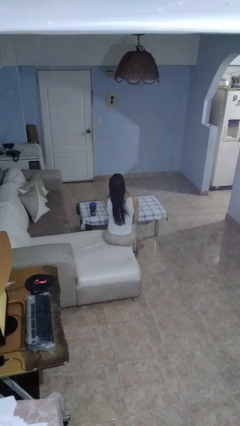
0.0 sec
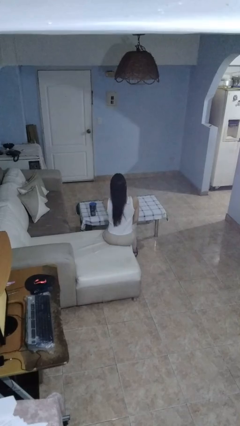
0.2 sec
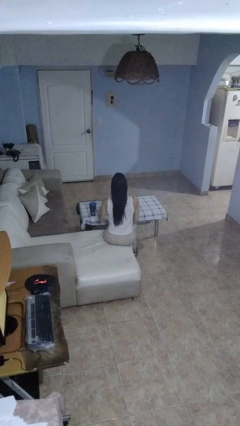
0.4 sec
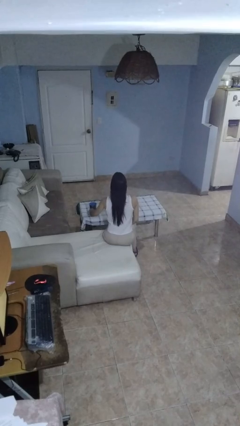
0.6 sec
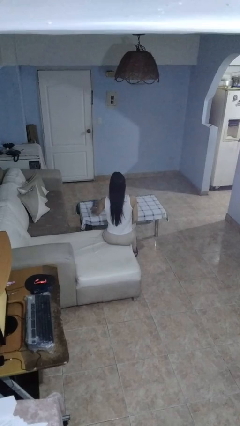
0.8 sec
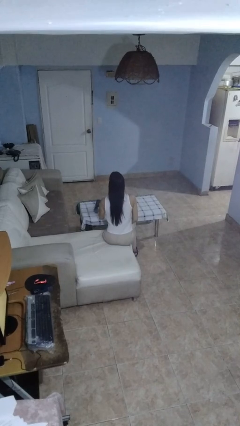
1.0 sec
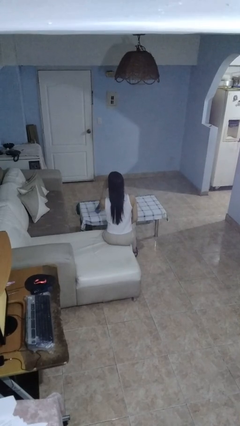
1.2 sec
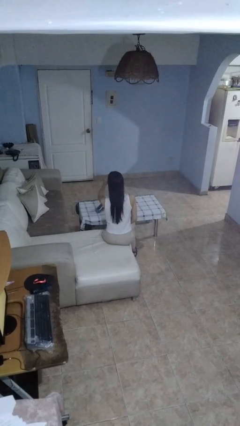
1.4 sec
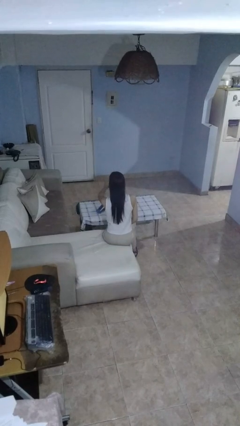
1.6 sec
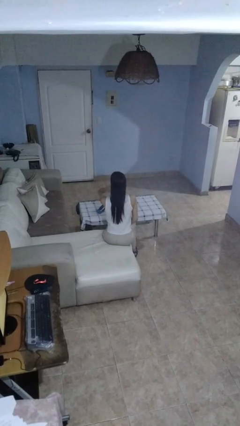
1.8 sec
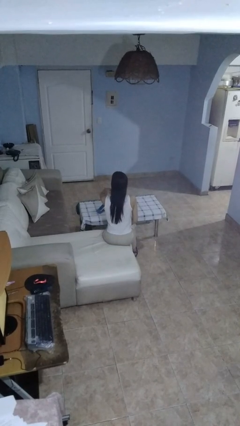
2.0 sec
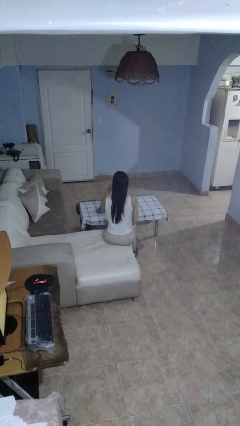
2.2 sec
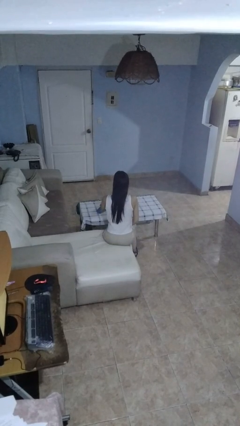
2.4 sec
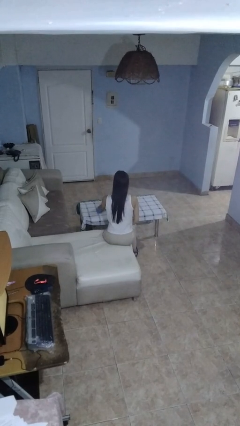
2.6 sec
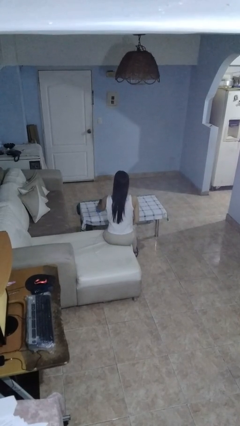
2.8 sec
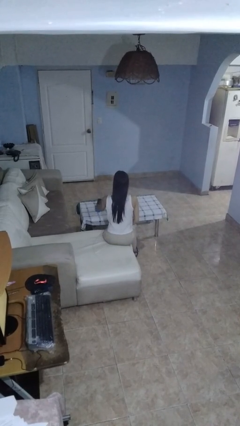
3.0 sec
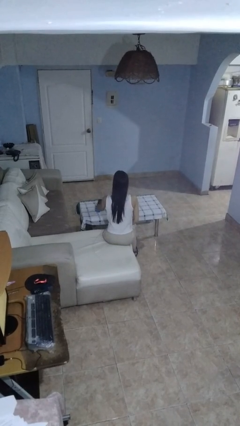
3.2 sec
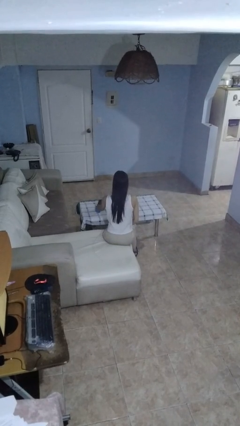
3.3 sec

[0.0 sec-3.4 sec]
person knocks over glass

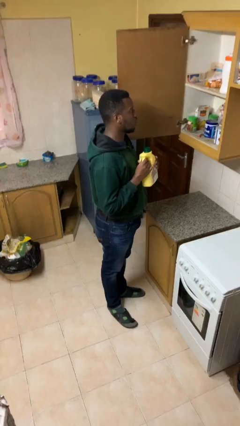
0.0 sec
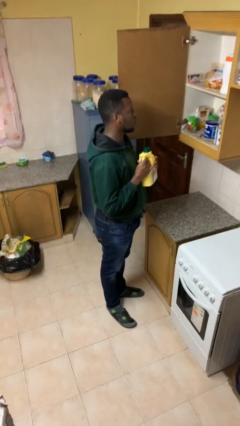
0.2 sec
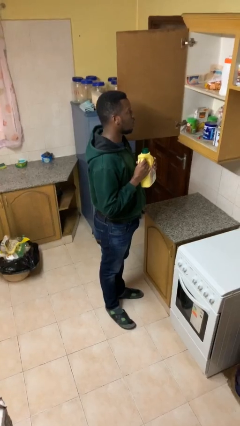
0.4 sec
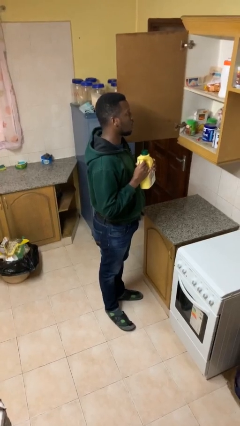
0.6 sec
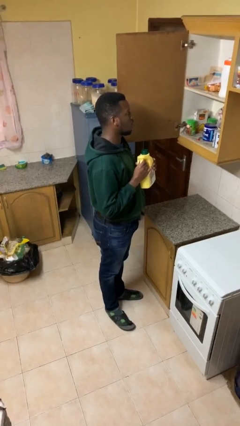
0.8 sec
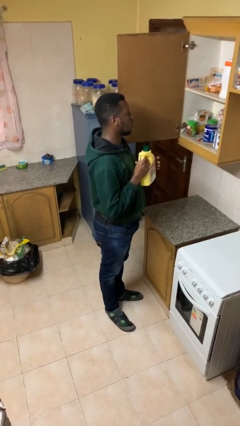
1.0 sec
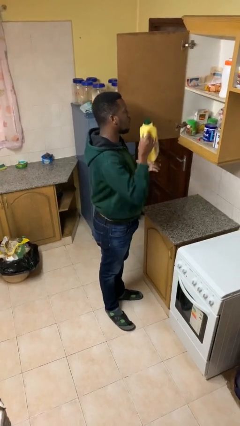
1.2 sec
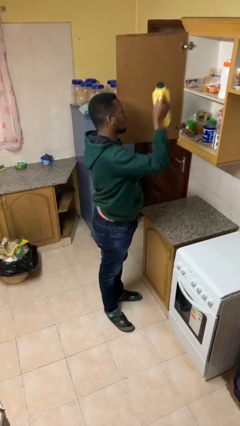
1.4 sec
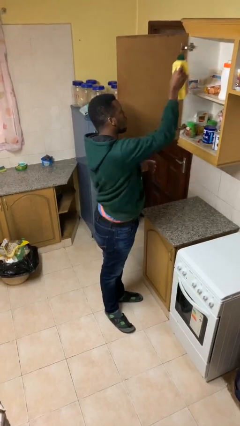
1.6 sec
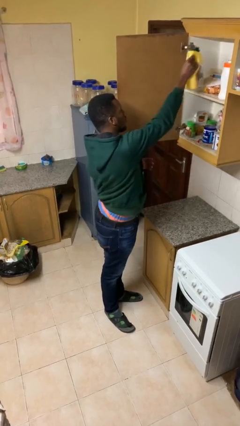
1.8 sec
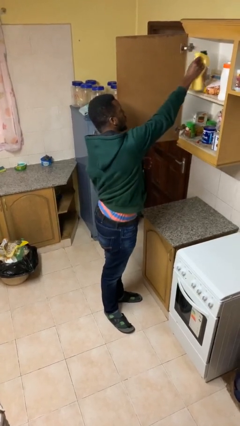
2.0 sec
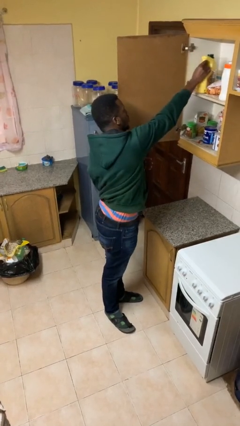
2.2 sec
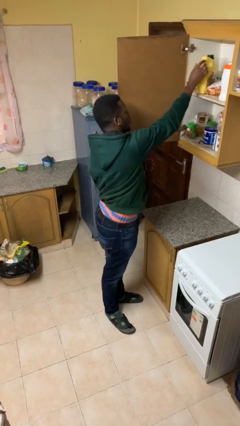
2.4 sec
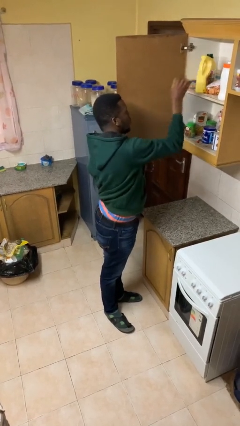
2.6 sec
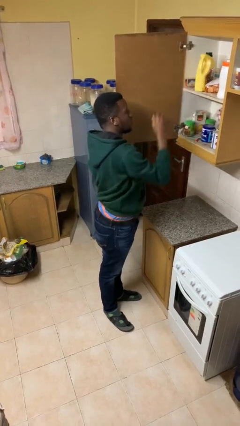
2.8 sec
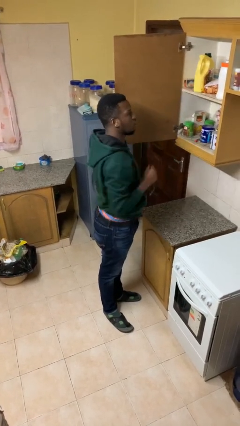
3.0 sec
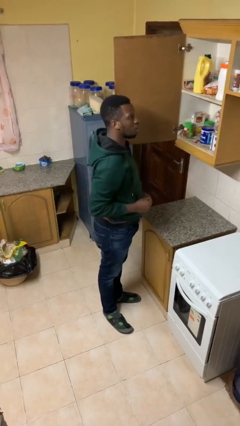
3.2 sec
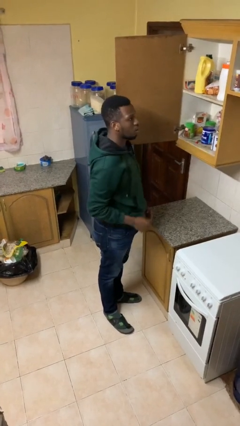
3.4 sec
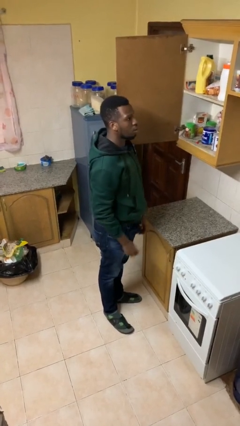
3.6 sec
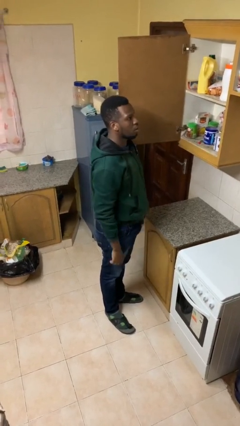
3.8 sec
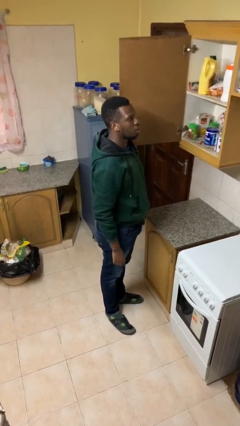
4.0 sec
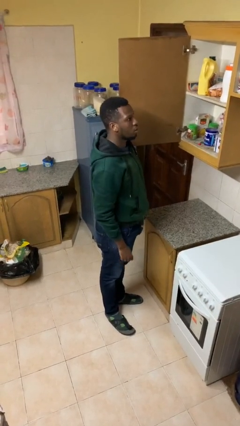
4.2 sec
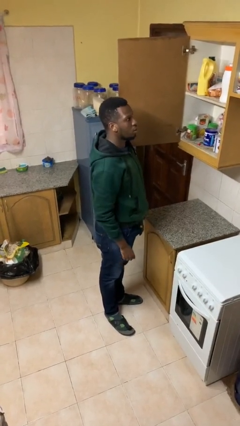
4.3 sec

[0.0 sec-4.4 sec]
person puts down object on shelf

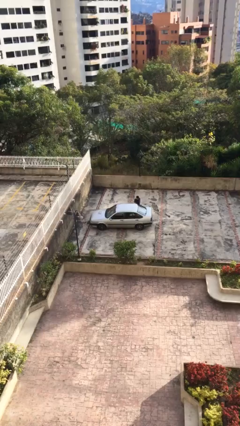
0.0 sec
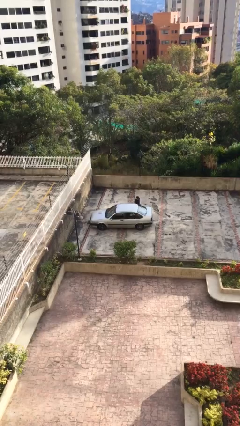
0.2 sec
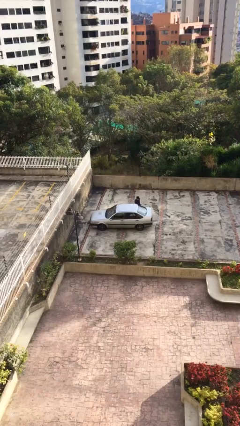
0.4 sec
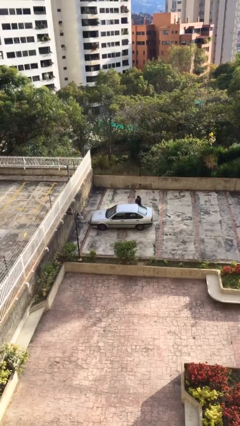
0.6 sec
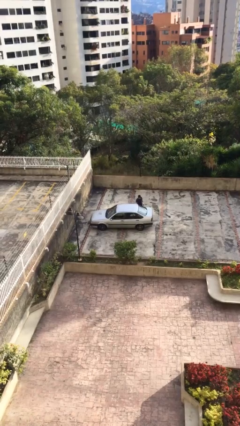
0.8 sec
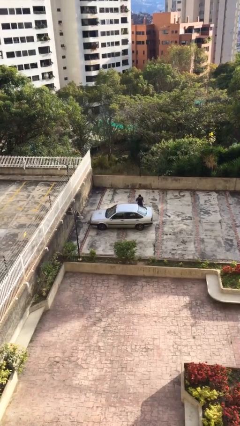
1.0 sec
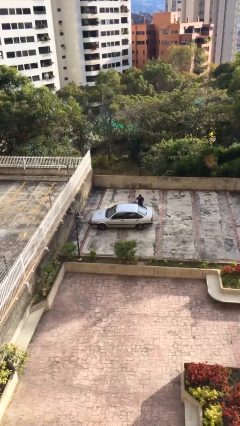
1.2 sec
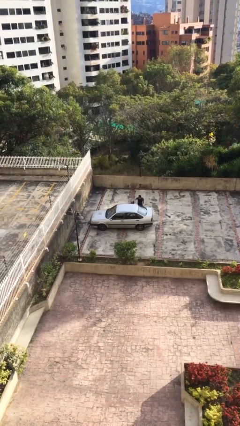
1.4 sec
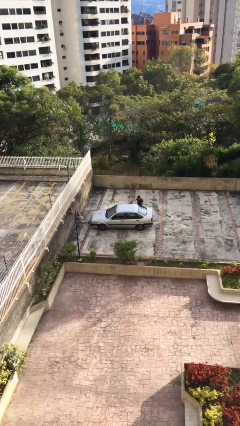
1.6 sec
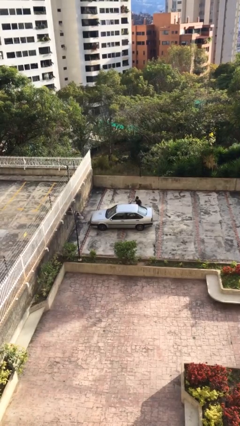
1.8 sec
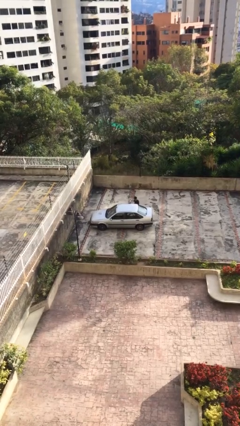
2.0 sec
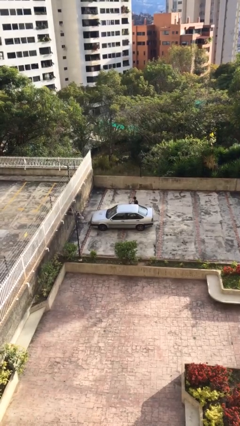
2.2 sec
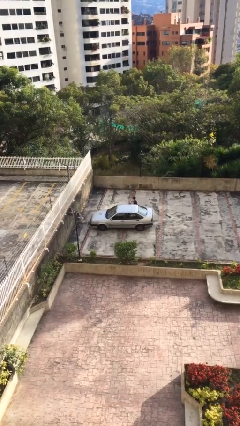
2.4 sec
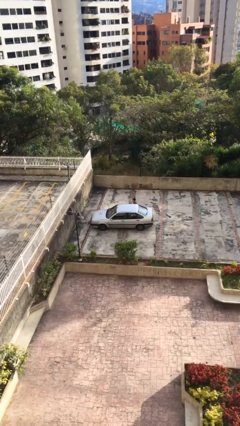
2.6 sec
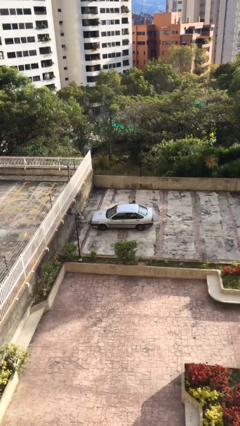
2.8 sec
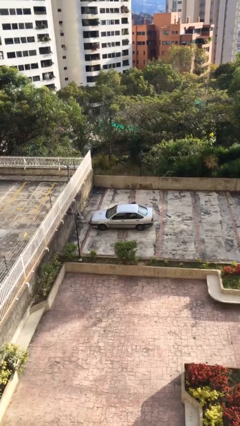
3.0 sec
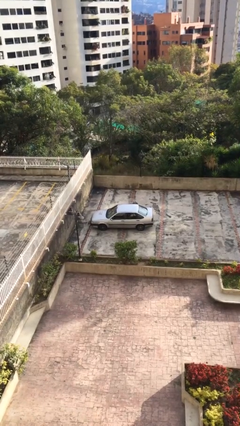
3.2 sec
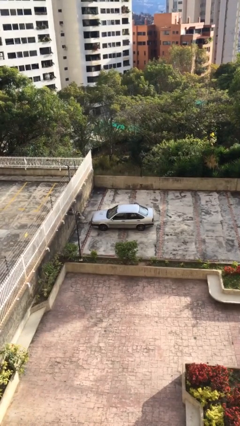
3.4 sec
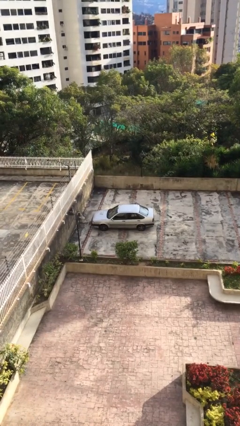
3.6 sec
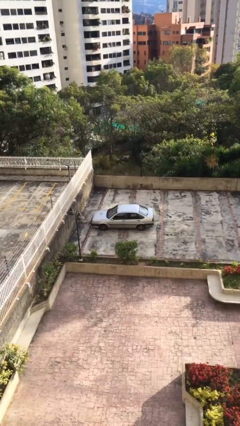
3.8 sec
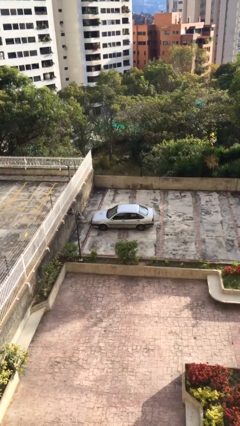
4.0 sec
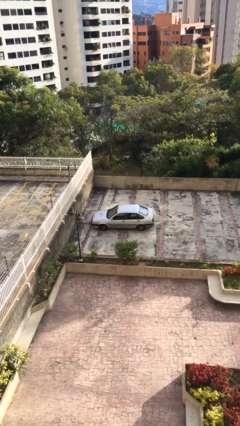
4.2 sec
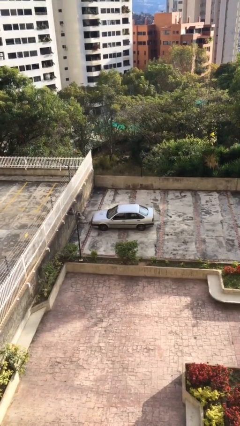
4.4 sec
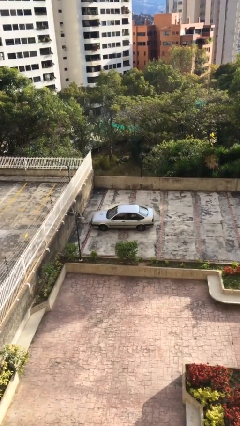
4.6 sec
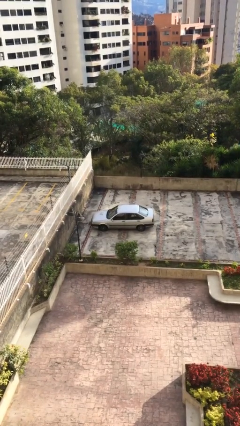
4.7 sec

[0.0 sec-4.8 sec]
car picks up person

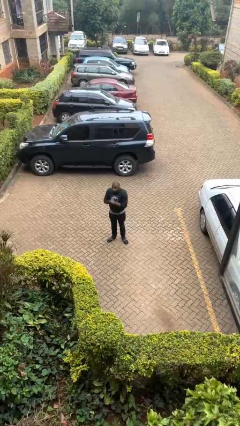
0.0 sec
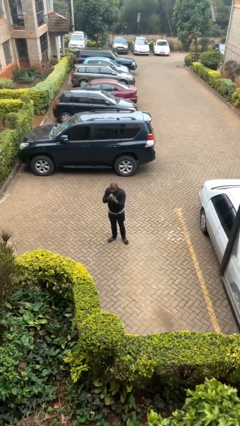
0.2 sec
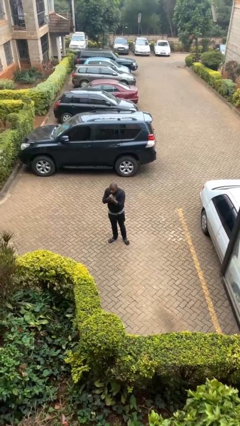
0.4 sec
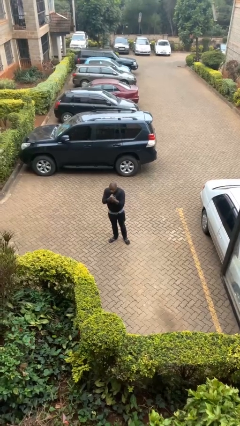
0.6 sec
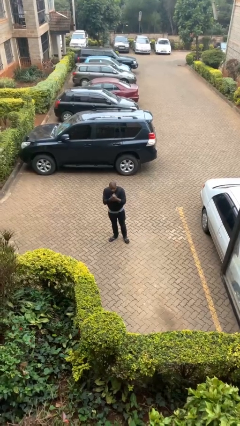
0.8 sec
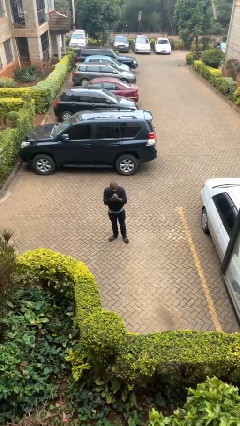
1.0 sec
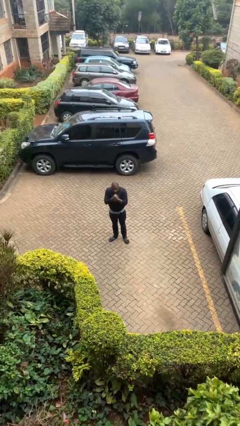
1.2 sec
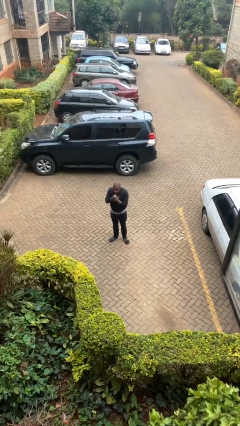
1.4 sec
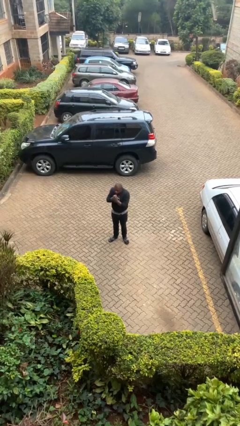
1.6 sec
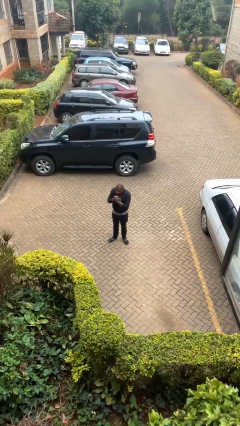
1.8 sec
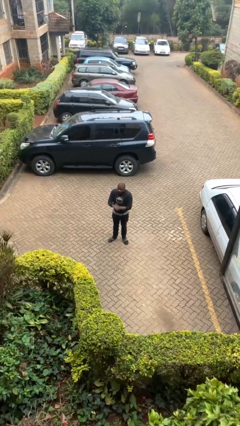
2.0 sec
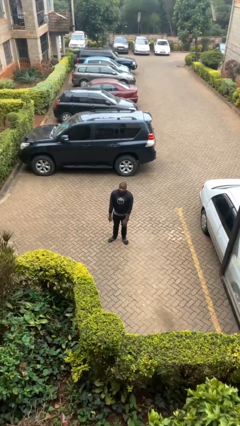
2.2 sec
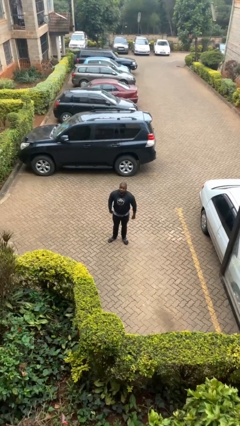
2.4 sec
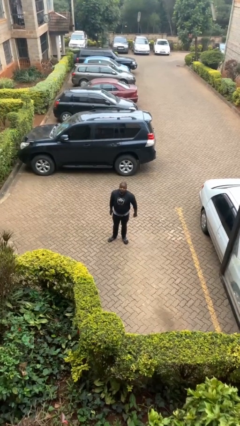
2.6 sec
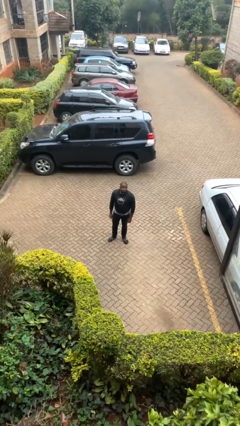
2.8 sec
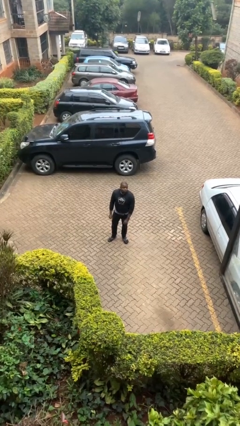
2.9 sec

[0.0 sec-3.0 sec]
person blows into hands

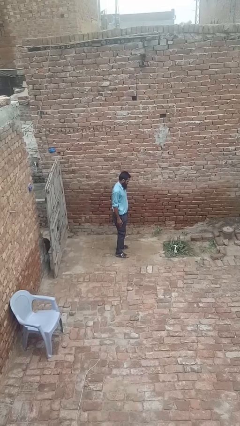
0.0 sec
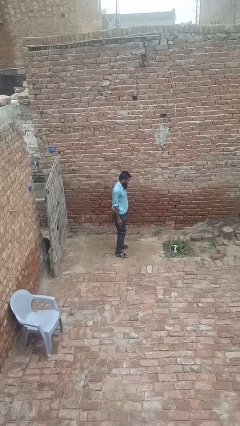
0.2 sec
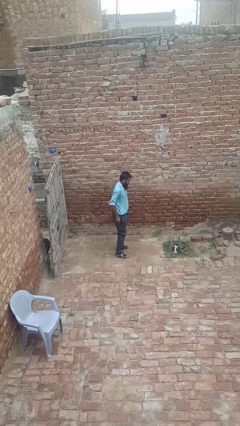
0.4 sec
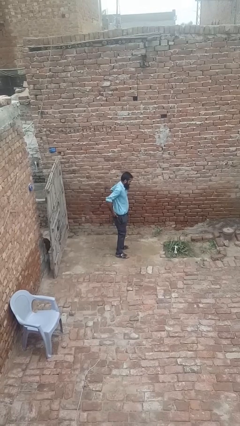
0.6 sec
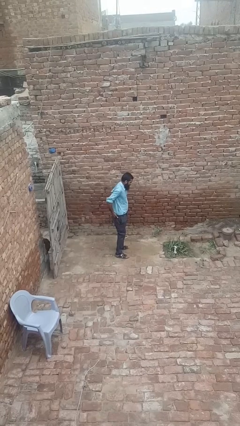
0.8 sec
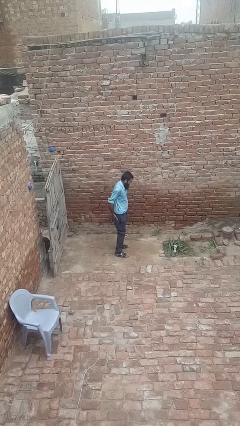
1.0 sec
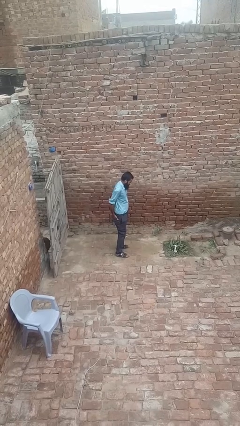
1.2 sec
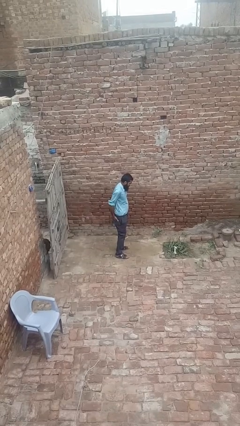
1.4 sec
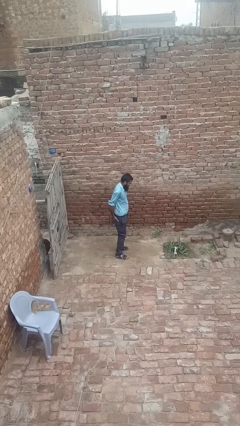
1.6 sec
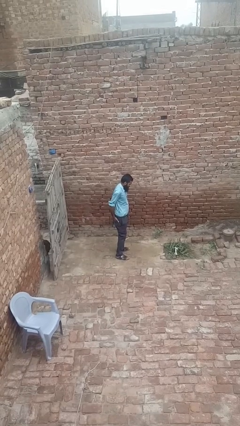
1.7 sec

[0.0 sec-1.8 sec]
person puts hands in back pockets

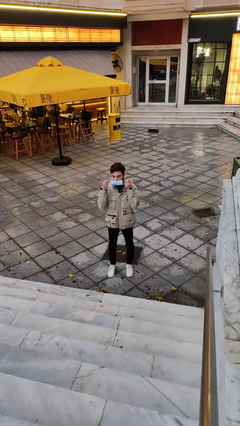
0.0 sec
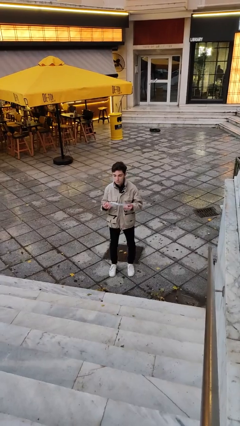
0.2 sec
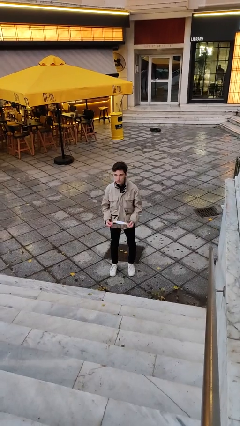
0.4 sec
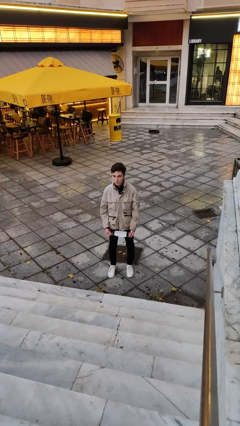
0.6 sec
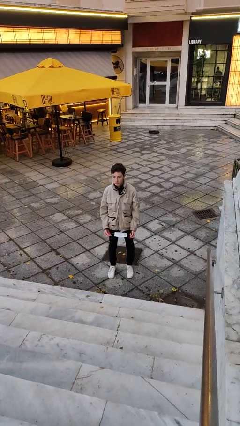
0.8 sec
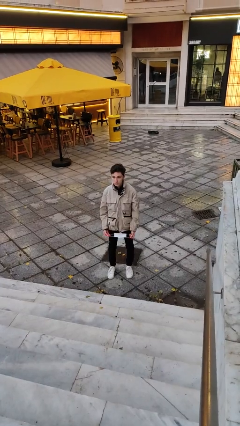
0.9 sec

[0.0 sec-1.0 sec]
person takes off facemask
